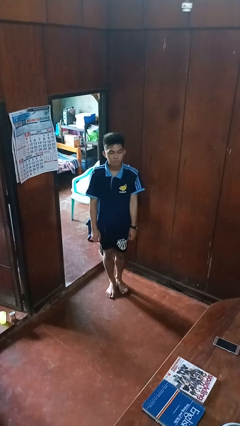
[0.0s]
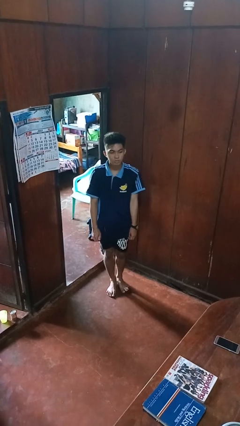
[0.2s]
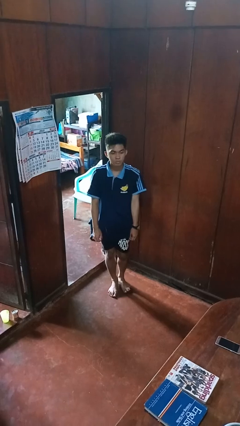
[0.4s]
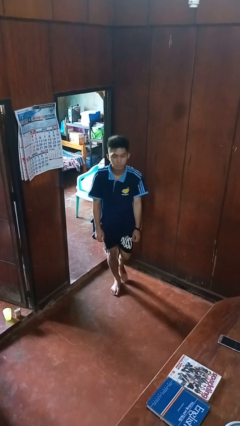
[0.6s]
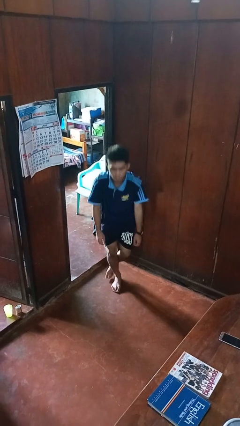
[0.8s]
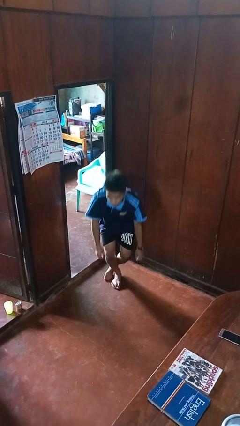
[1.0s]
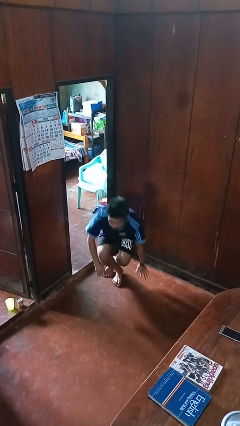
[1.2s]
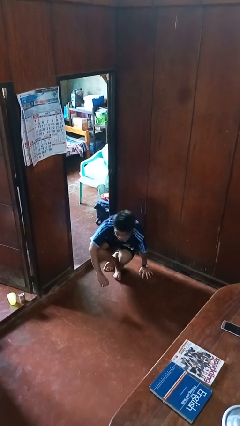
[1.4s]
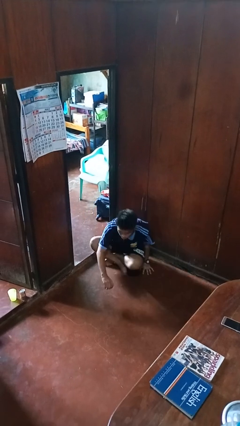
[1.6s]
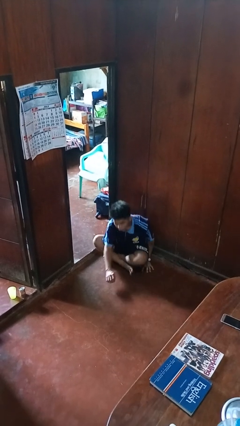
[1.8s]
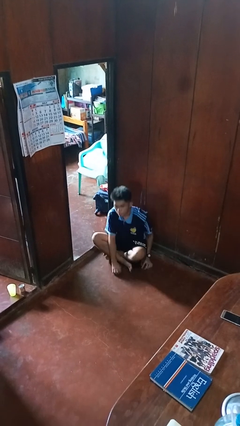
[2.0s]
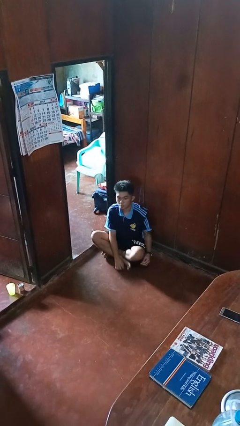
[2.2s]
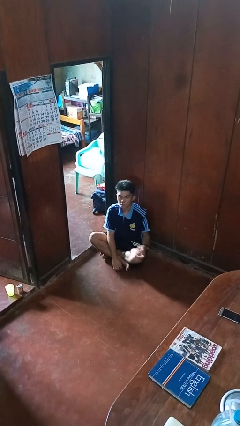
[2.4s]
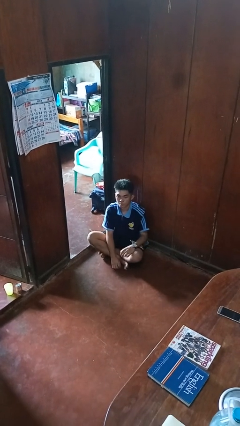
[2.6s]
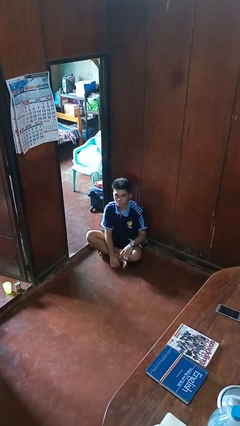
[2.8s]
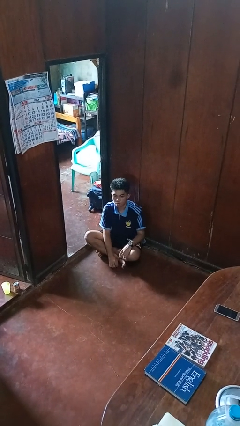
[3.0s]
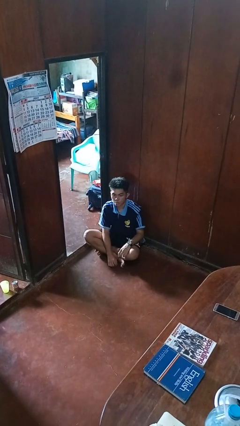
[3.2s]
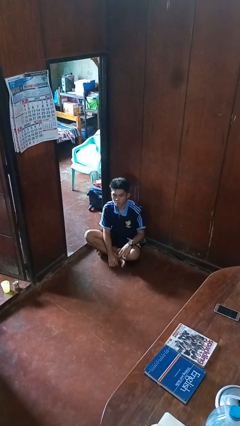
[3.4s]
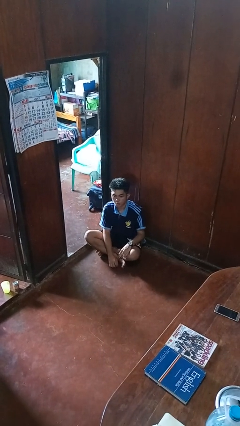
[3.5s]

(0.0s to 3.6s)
person sits crisscross

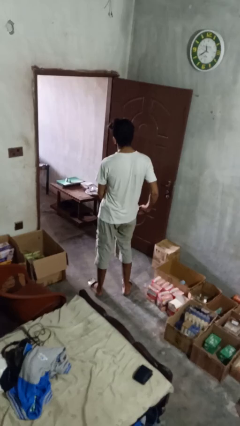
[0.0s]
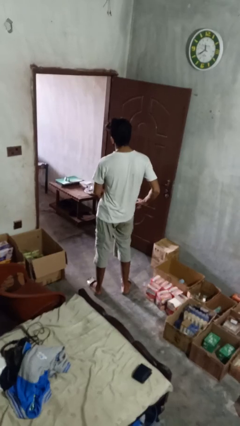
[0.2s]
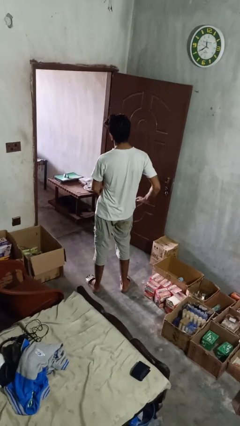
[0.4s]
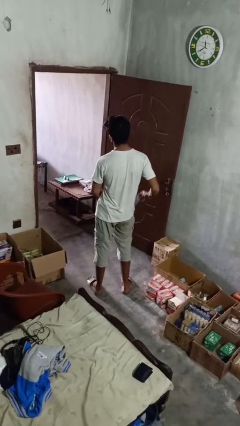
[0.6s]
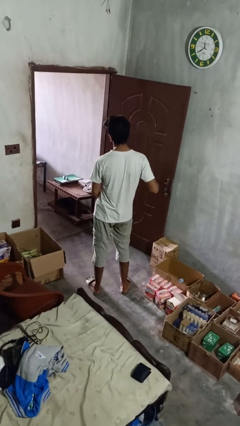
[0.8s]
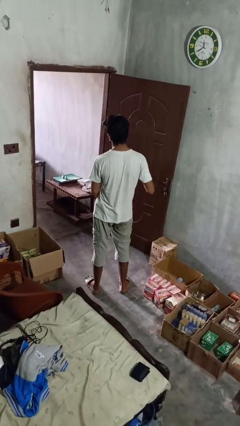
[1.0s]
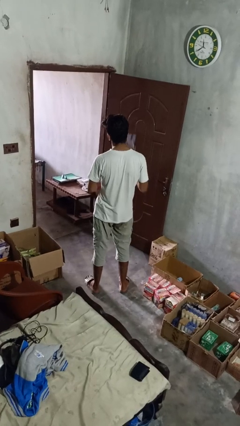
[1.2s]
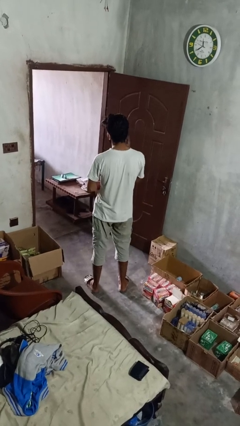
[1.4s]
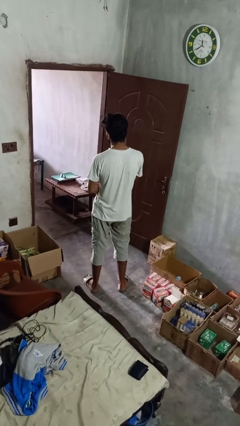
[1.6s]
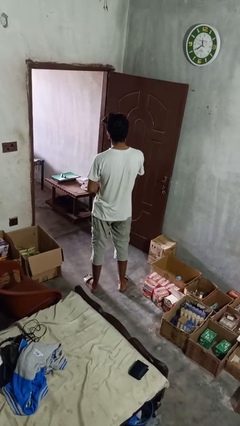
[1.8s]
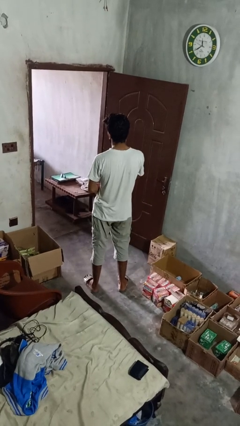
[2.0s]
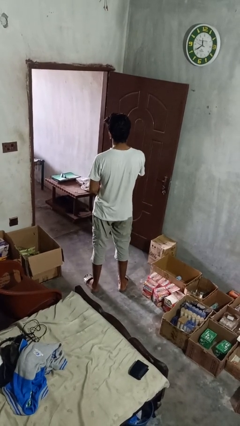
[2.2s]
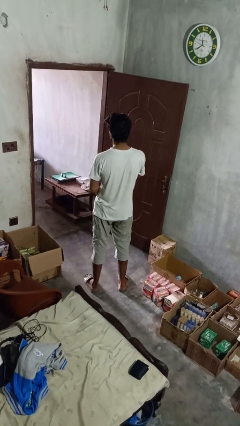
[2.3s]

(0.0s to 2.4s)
person takes phone from pocket

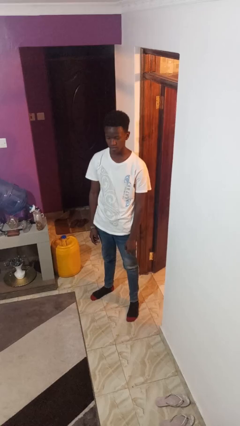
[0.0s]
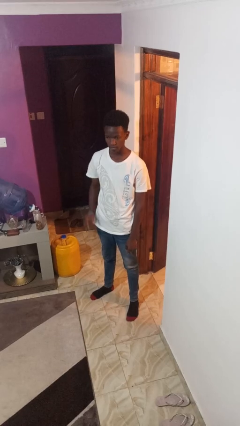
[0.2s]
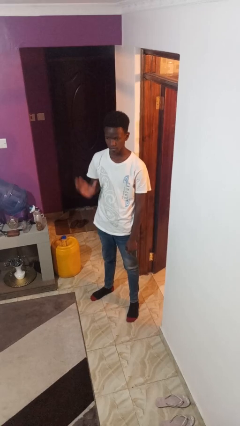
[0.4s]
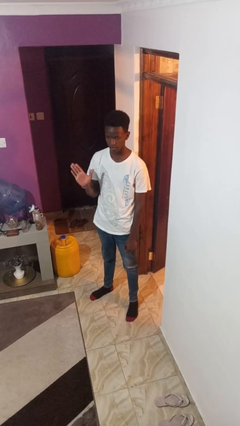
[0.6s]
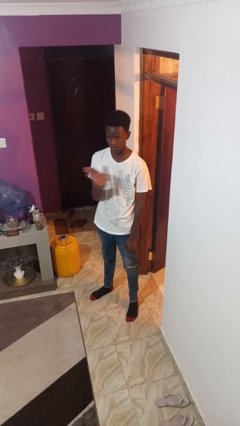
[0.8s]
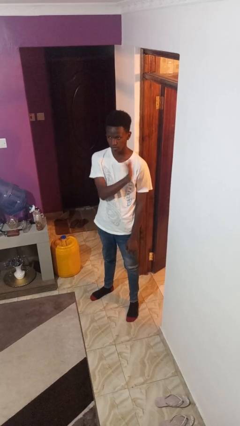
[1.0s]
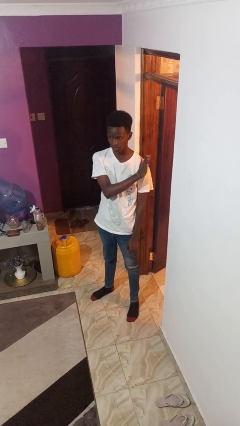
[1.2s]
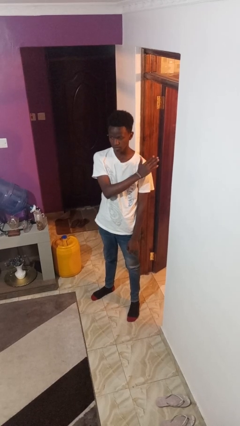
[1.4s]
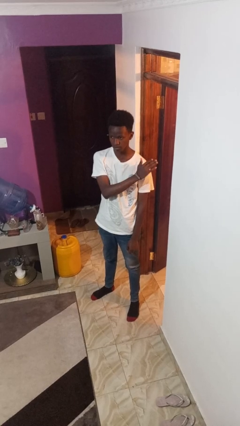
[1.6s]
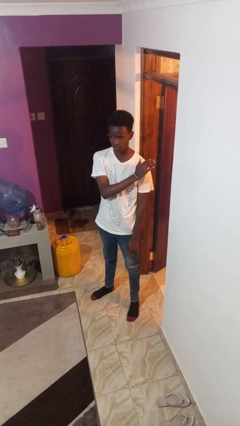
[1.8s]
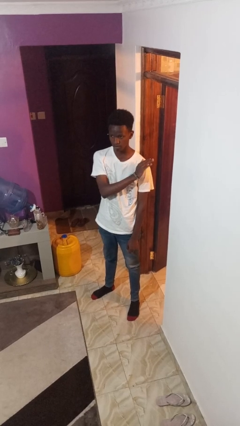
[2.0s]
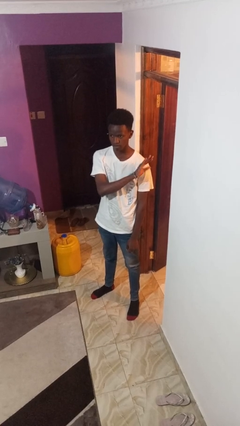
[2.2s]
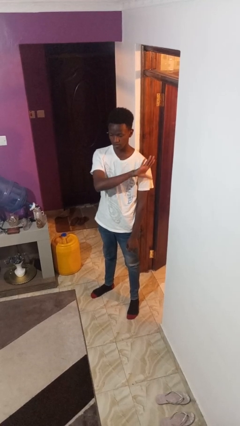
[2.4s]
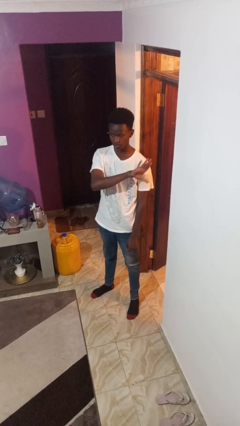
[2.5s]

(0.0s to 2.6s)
person gestures swipe left

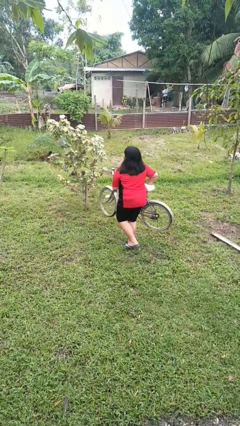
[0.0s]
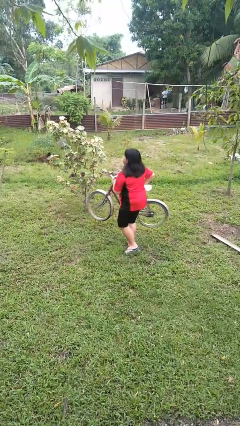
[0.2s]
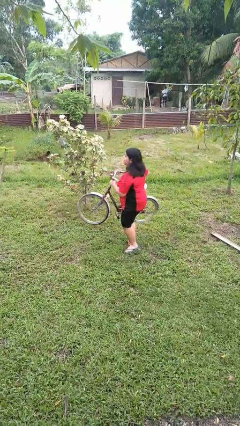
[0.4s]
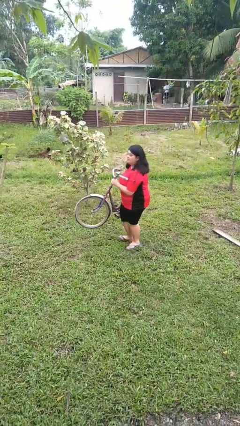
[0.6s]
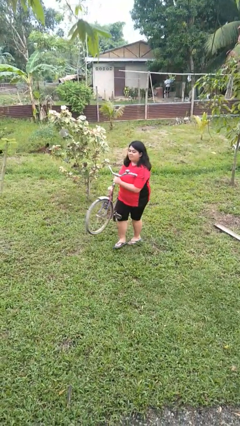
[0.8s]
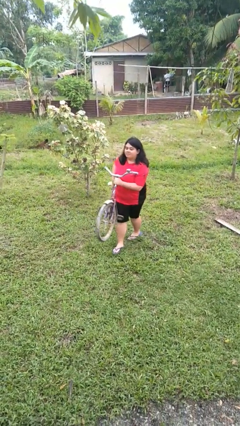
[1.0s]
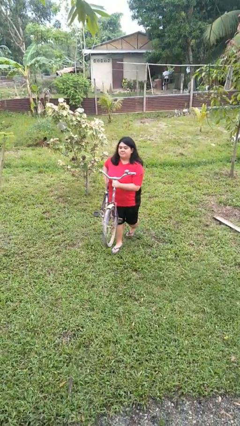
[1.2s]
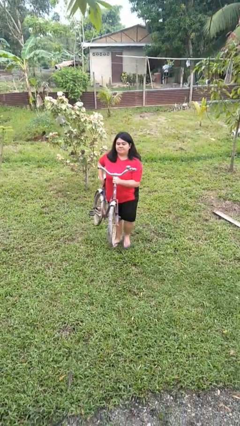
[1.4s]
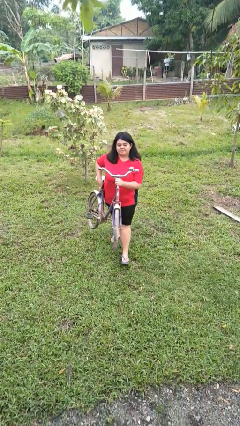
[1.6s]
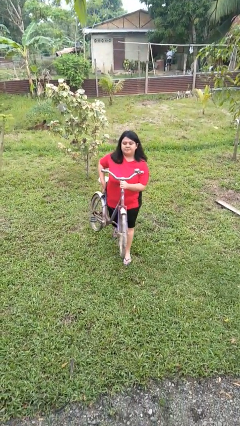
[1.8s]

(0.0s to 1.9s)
person carries bicycle

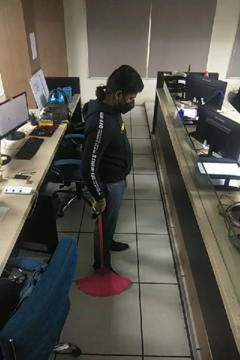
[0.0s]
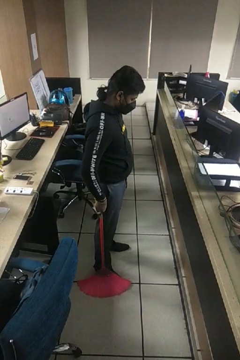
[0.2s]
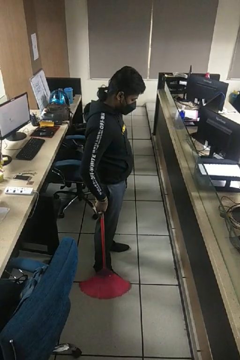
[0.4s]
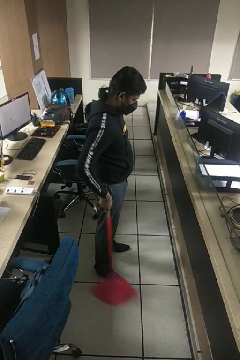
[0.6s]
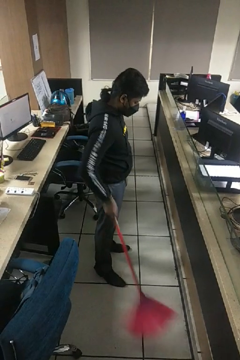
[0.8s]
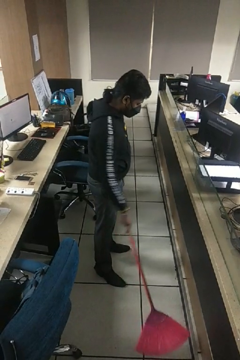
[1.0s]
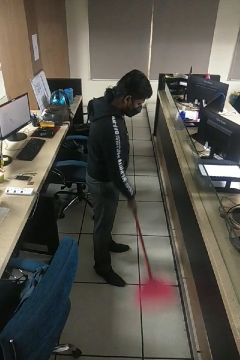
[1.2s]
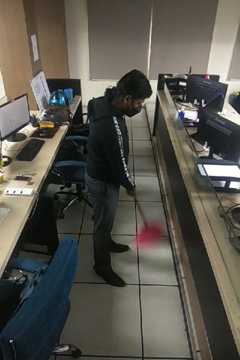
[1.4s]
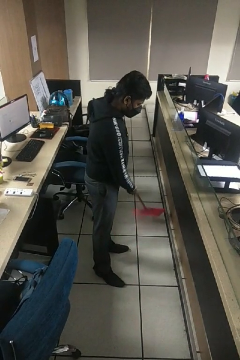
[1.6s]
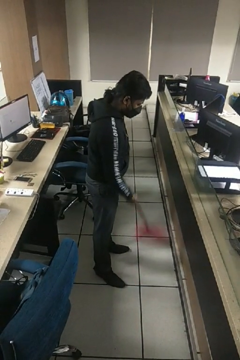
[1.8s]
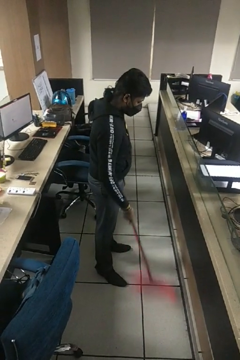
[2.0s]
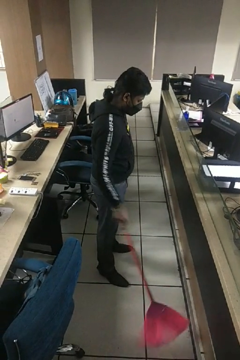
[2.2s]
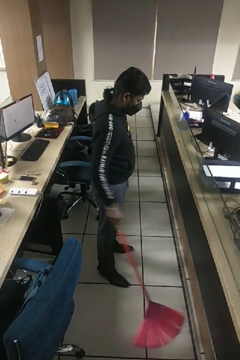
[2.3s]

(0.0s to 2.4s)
person sweeps floor

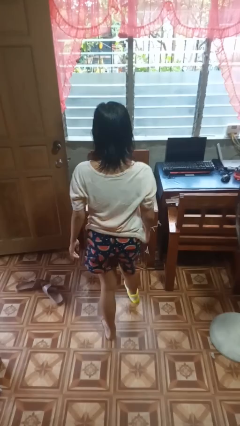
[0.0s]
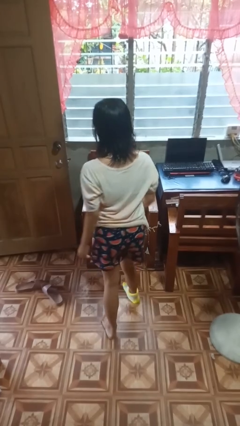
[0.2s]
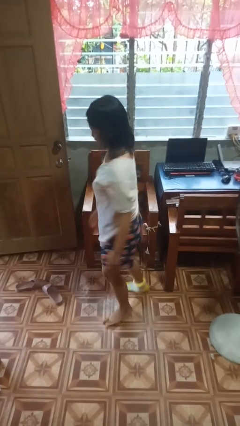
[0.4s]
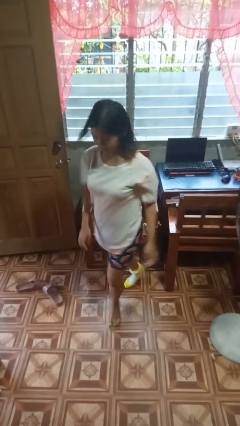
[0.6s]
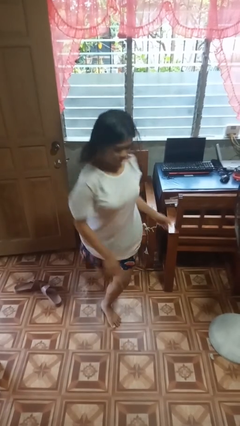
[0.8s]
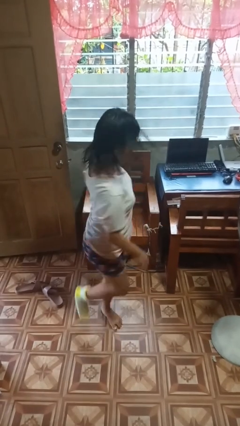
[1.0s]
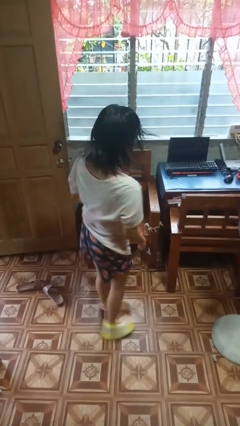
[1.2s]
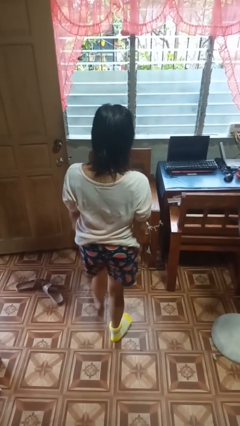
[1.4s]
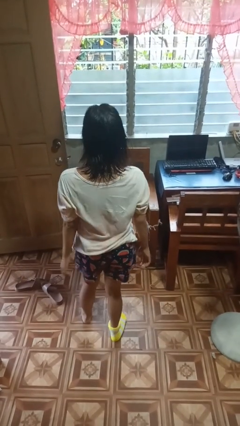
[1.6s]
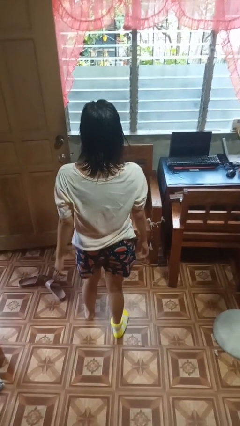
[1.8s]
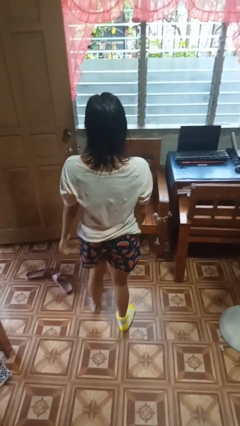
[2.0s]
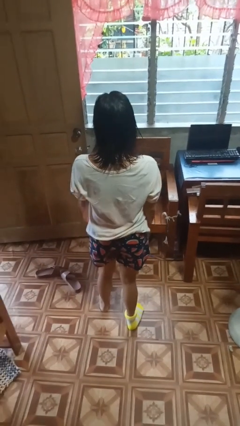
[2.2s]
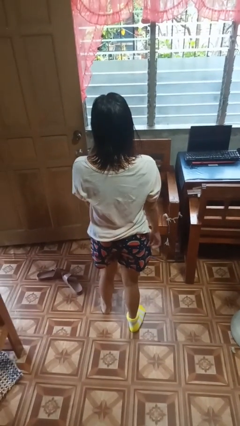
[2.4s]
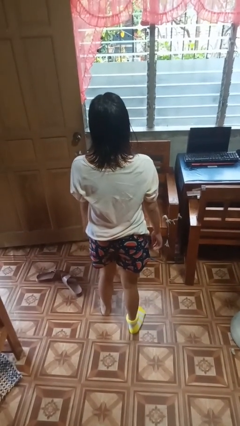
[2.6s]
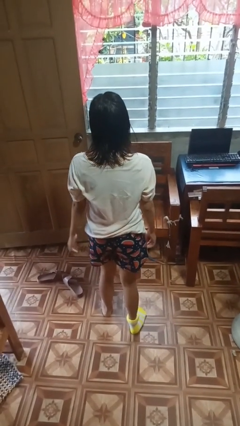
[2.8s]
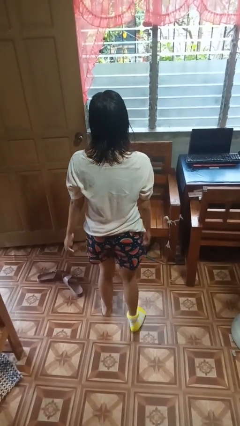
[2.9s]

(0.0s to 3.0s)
person twirls

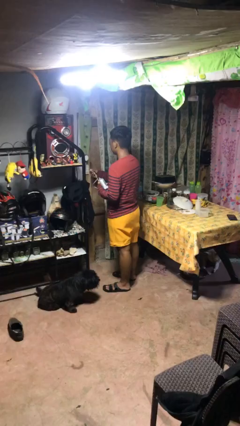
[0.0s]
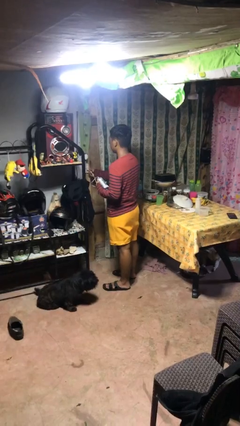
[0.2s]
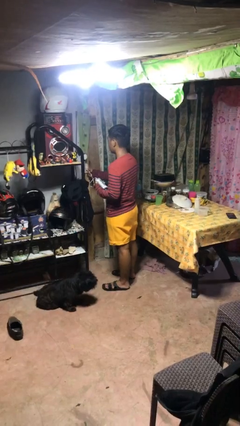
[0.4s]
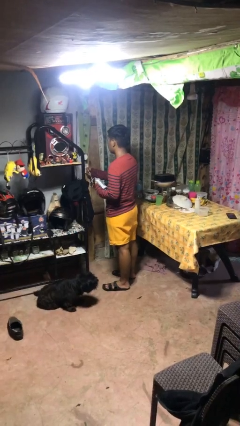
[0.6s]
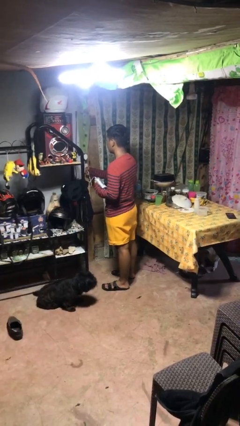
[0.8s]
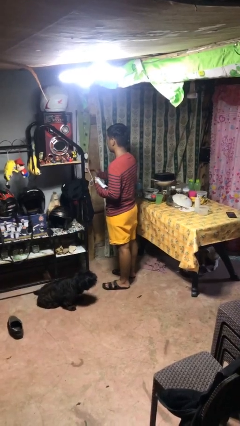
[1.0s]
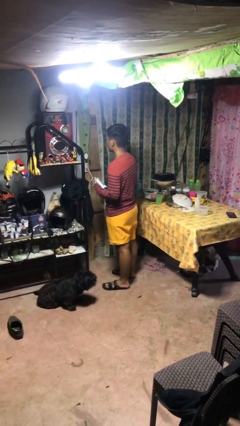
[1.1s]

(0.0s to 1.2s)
person plugs into electrical socket

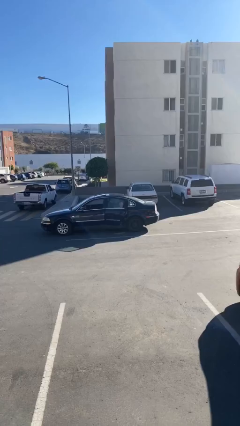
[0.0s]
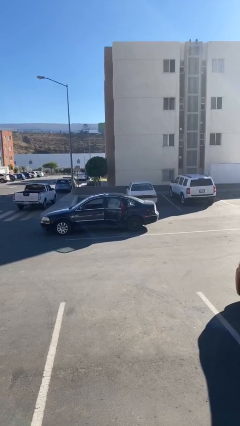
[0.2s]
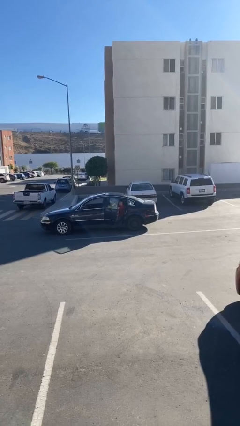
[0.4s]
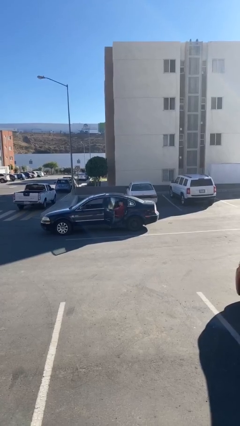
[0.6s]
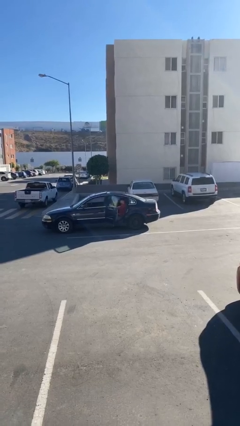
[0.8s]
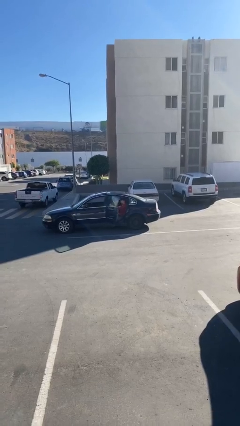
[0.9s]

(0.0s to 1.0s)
person opens car door
